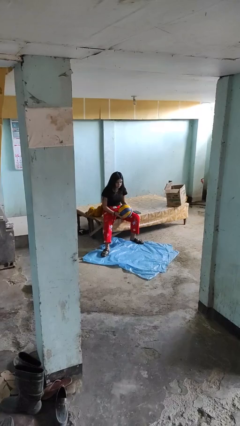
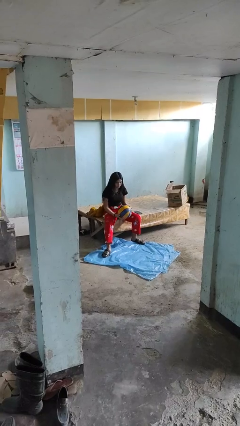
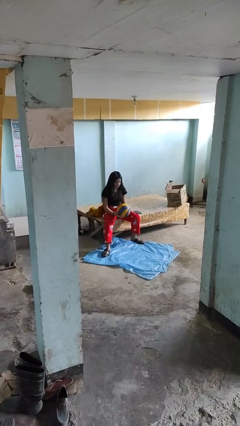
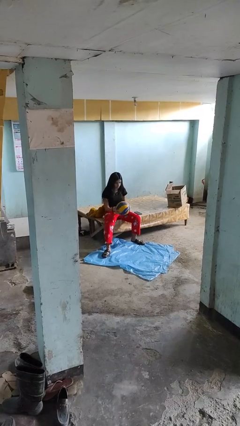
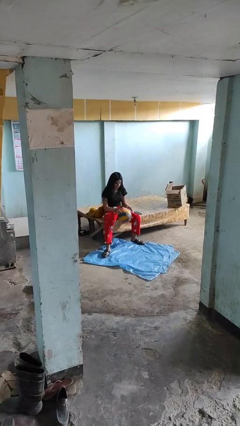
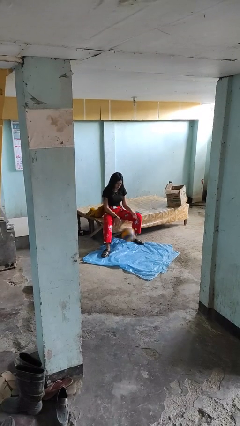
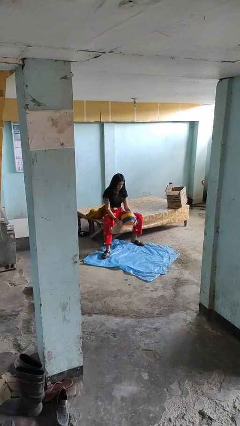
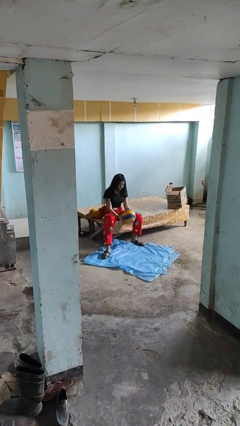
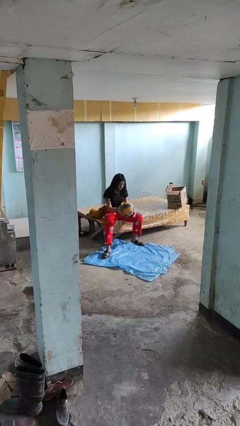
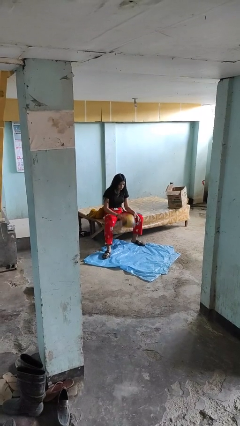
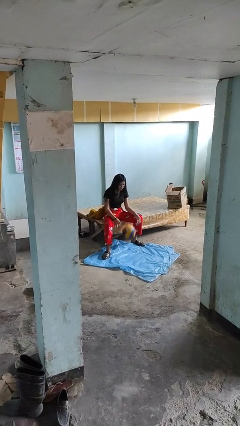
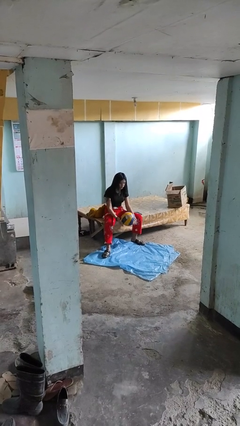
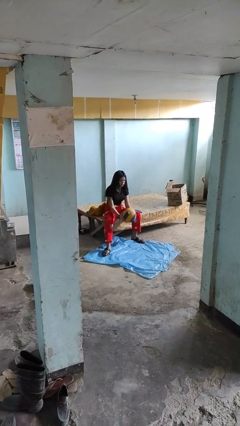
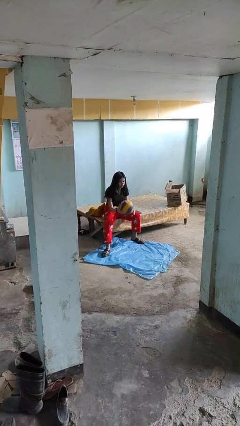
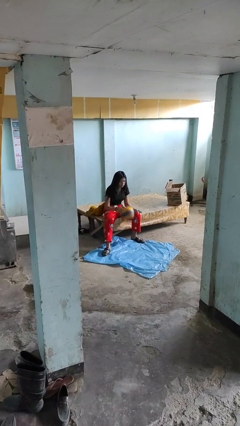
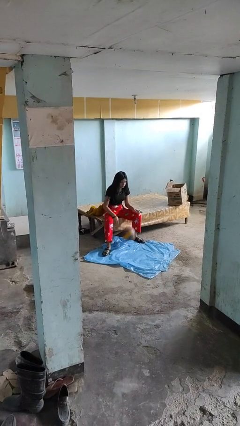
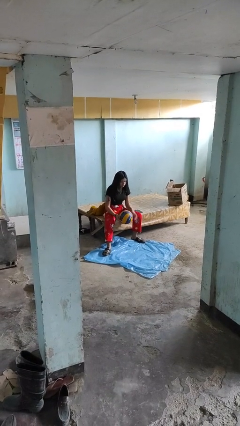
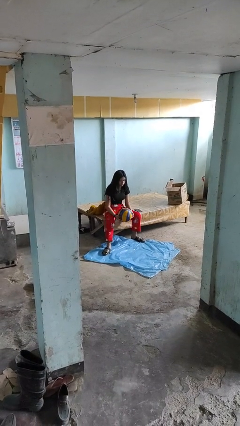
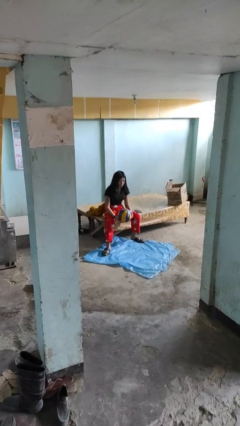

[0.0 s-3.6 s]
person bounces ball on floor

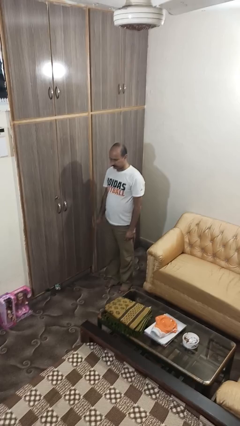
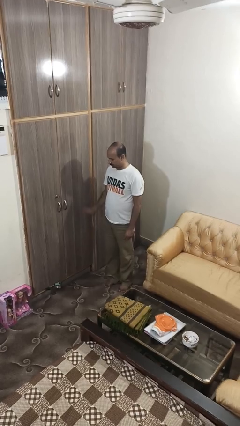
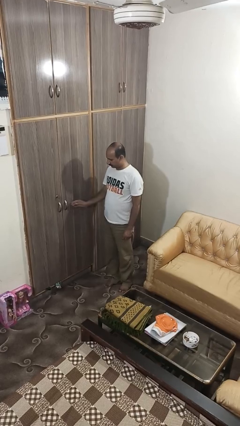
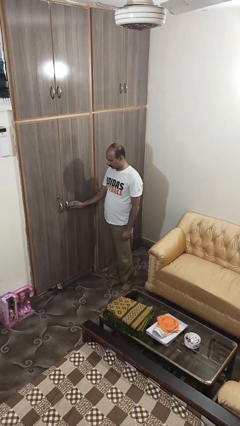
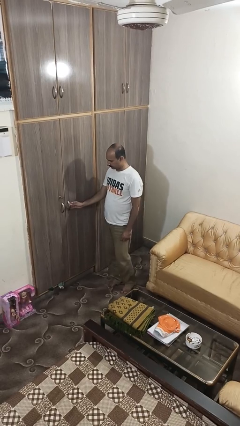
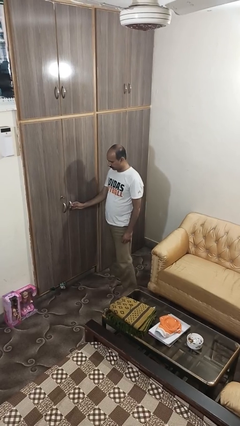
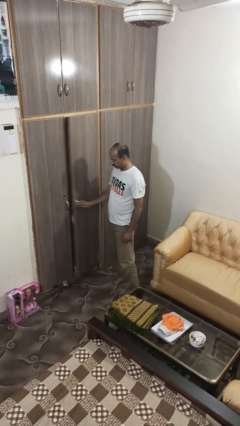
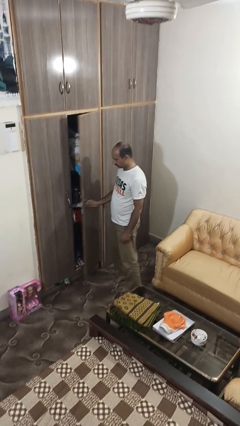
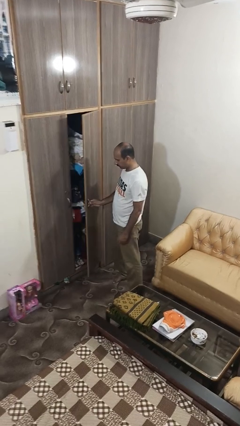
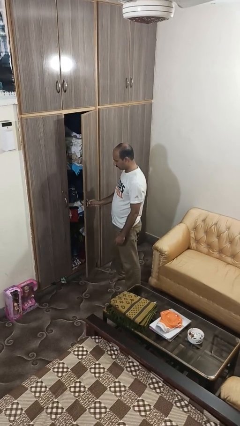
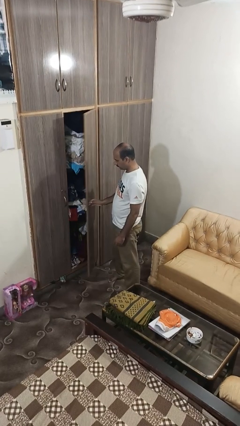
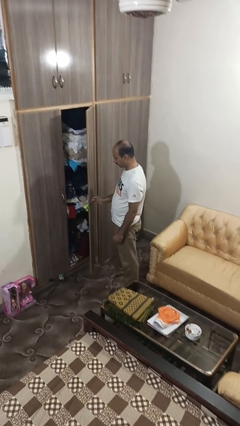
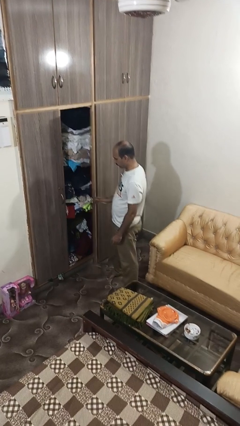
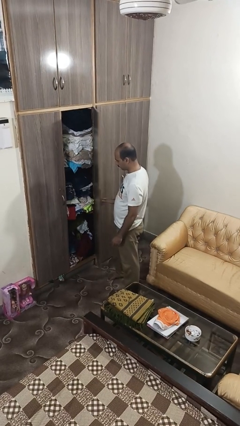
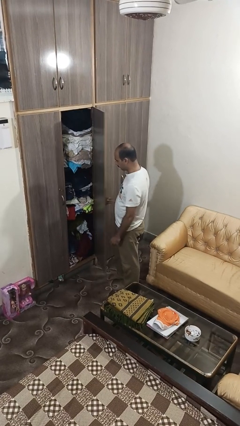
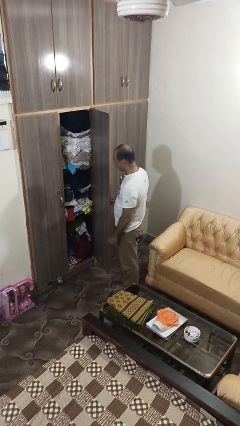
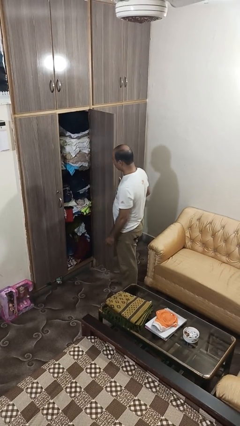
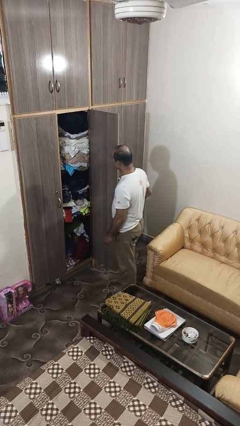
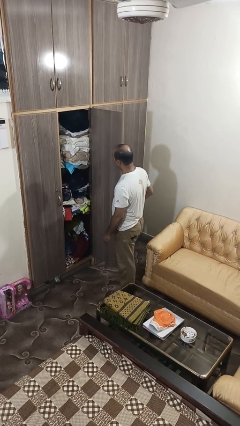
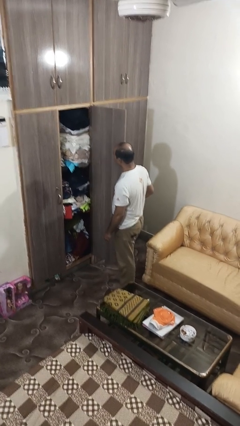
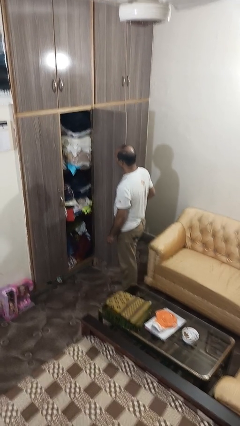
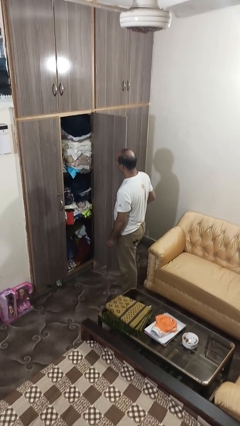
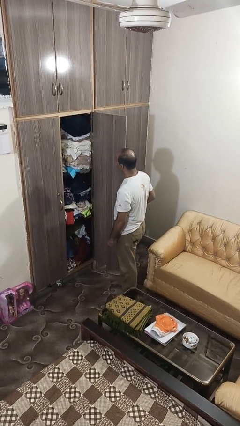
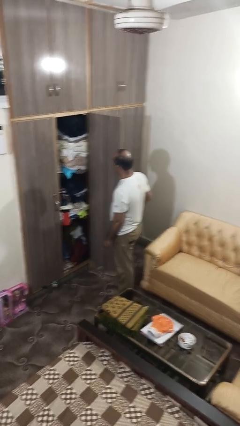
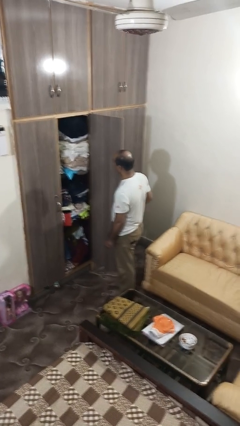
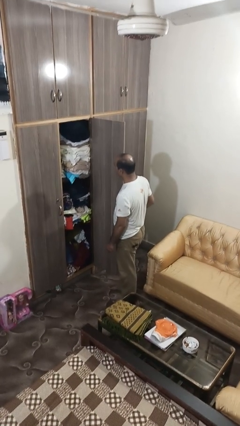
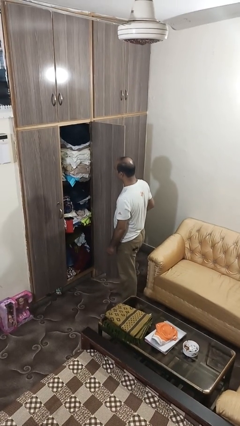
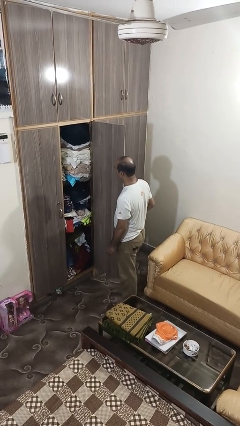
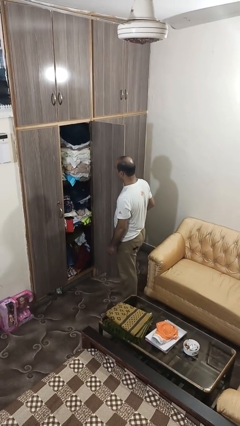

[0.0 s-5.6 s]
person opens closet door

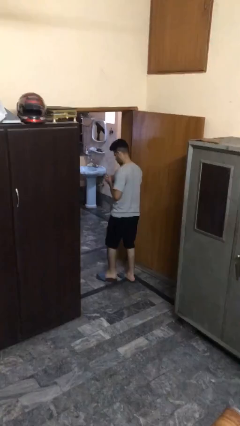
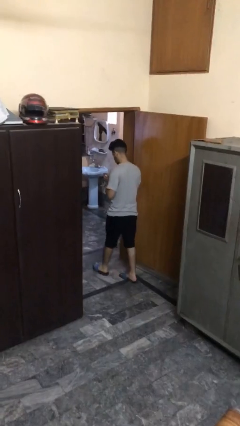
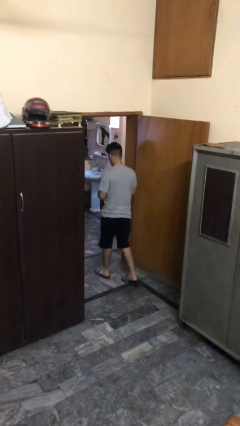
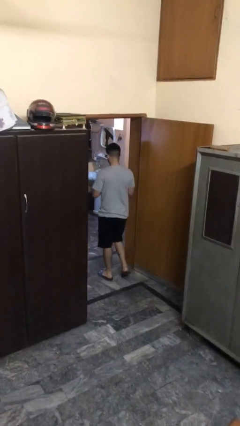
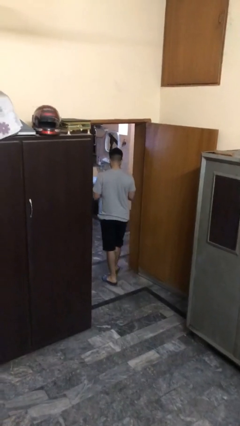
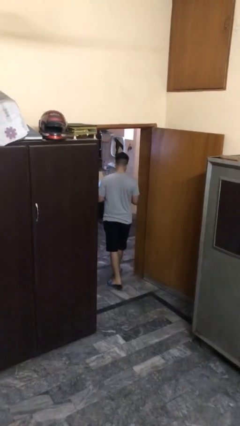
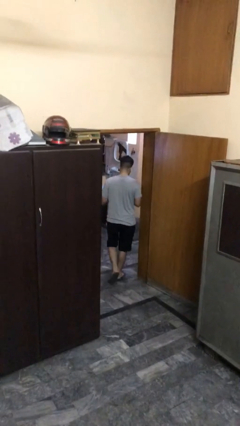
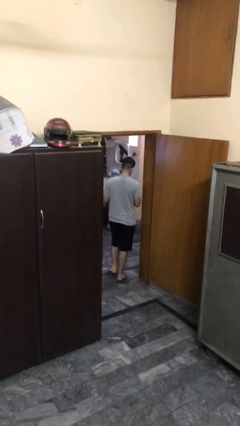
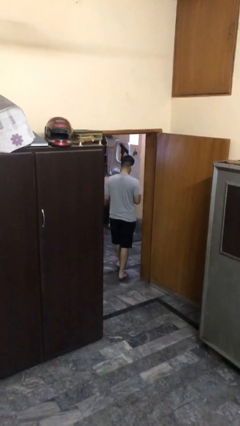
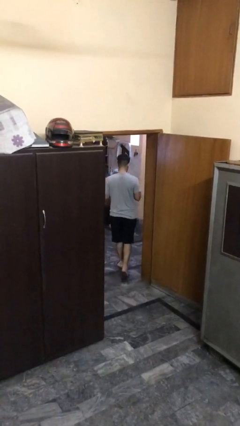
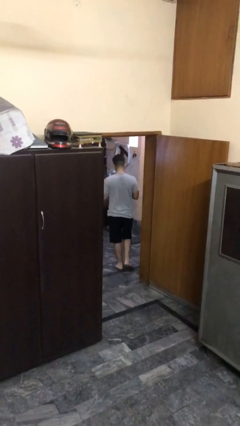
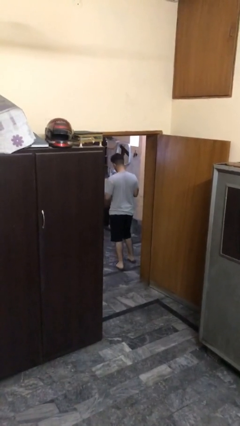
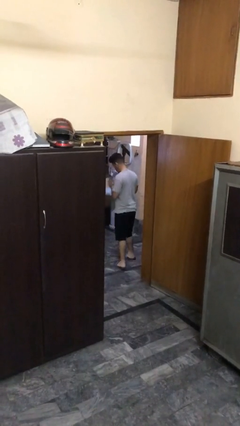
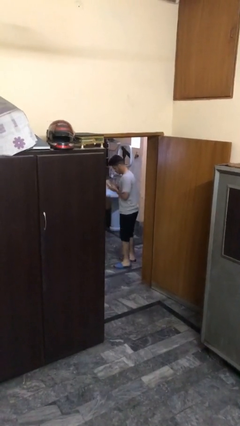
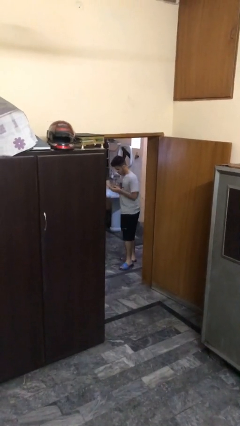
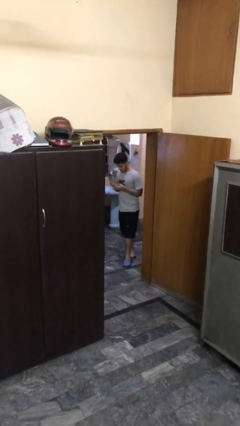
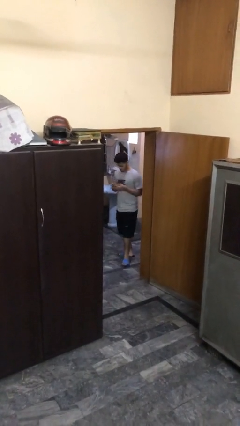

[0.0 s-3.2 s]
person exits scene through structure

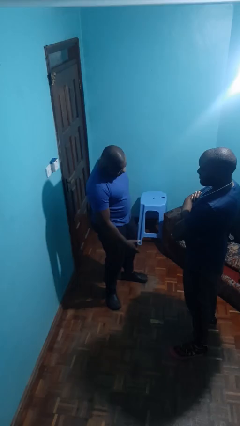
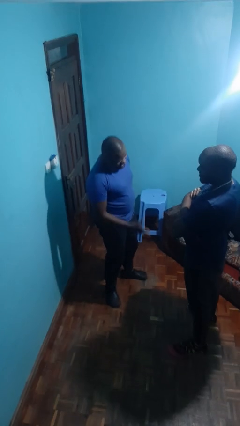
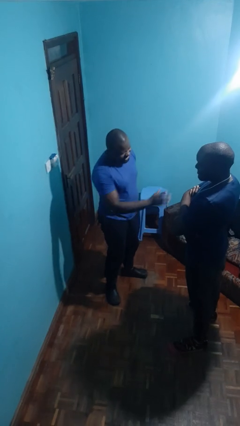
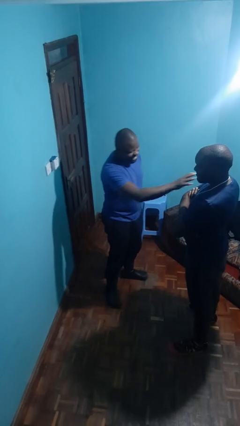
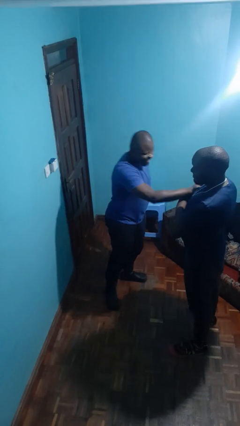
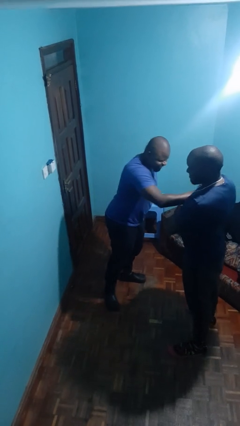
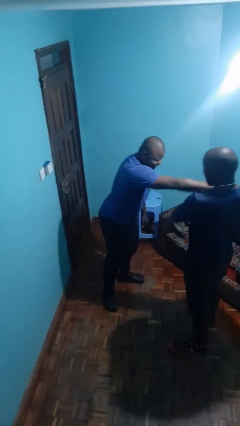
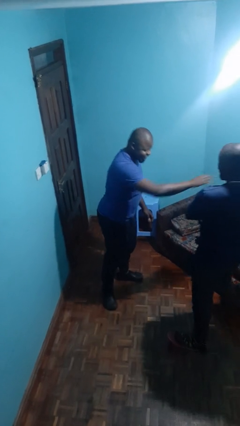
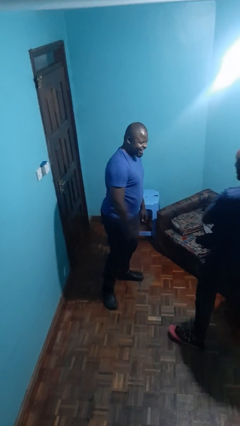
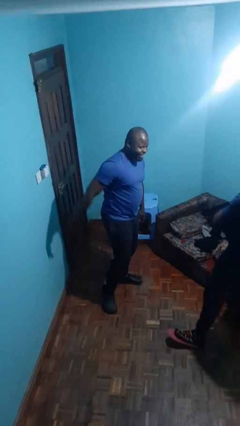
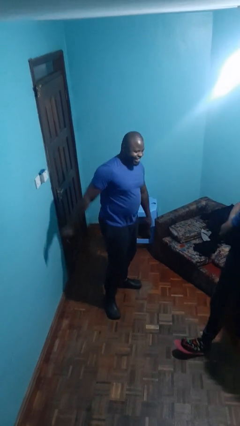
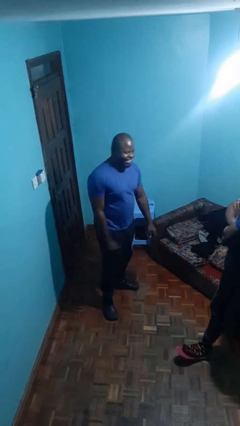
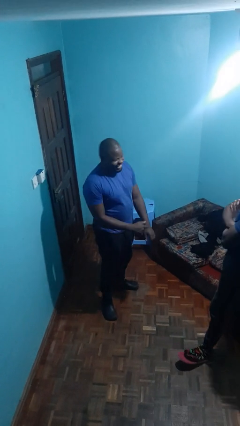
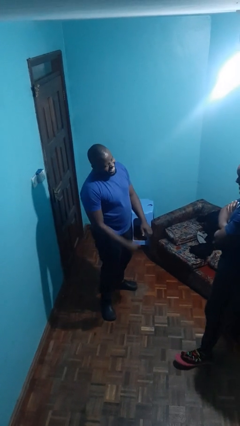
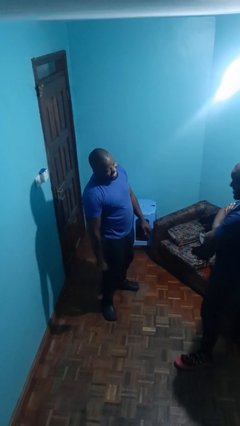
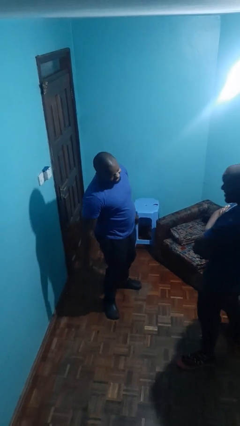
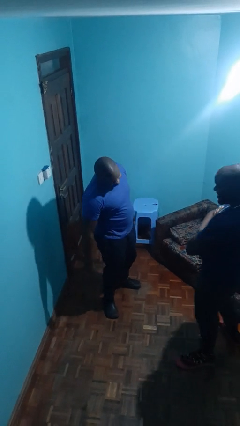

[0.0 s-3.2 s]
person shoves person

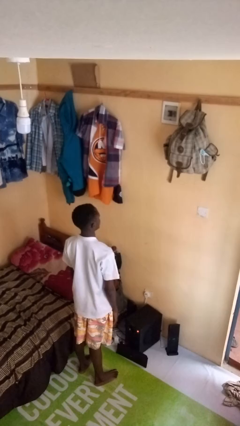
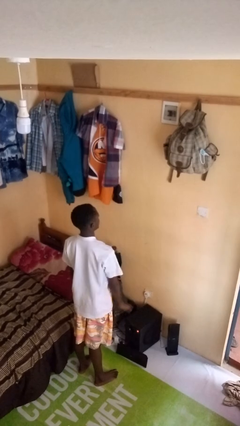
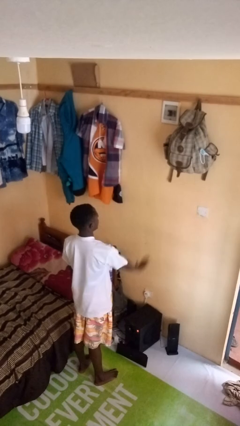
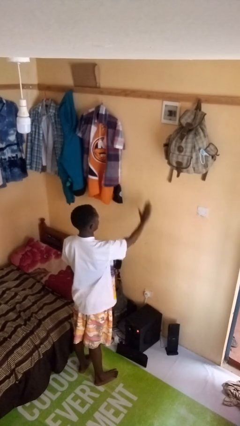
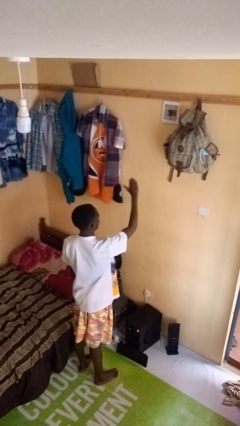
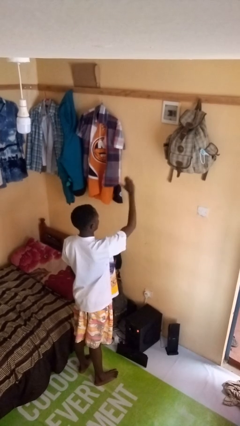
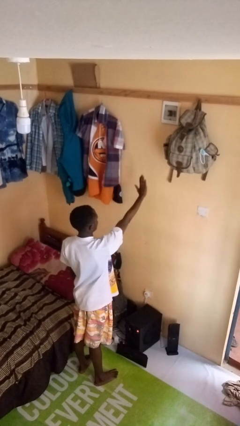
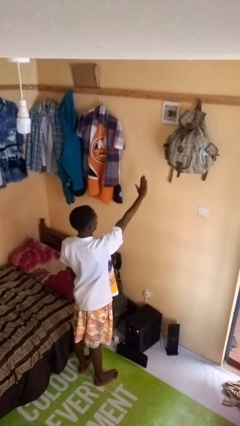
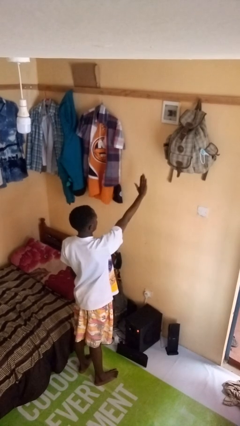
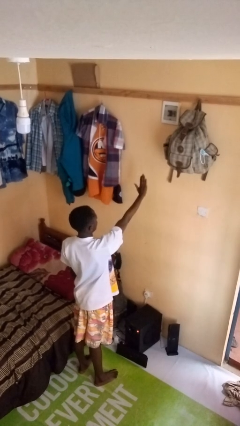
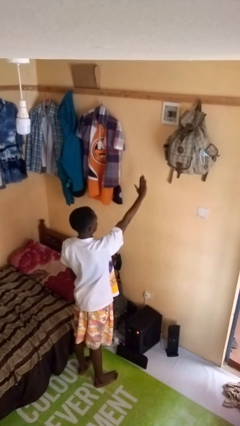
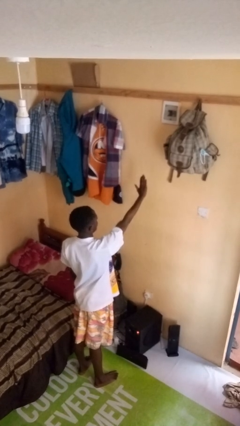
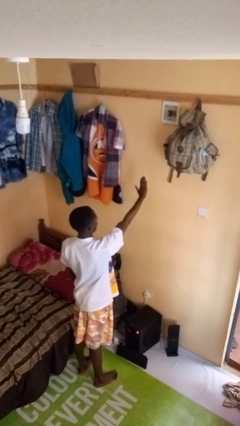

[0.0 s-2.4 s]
person gestures stop
